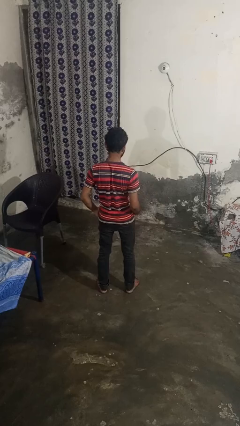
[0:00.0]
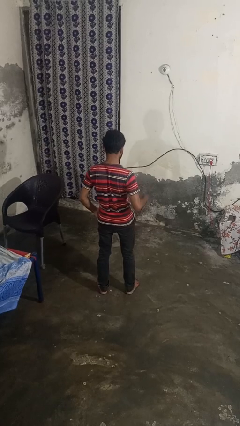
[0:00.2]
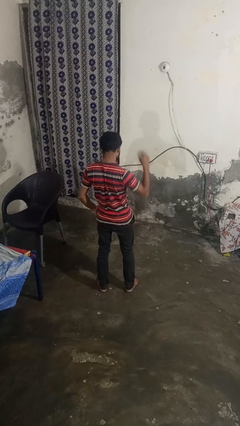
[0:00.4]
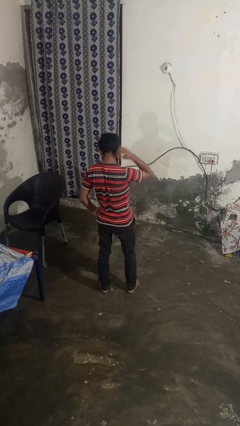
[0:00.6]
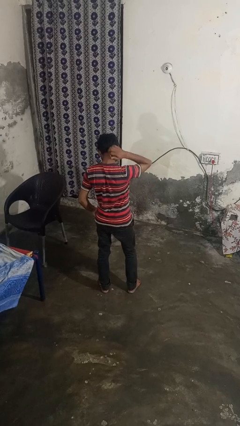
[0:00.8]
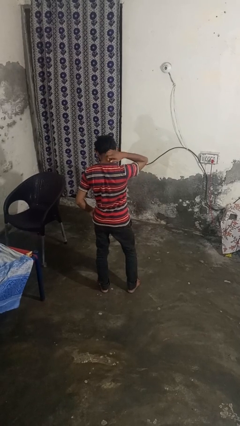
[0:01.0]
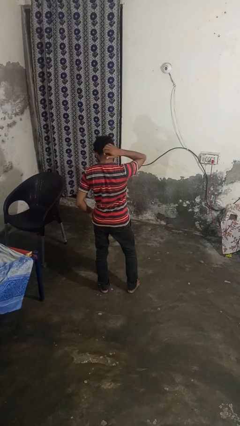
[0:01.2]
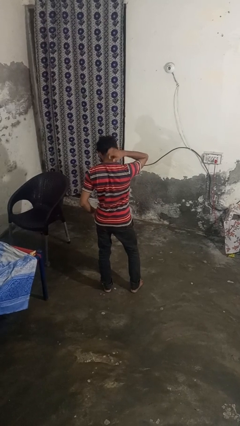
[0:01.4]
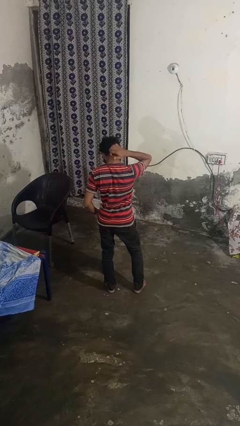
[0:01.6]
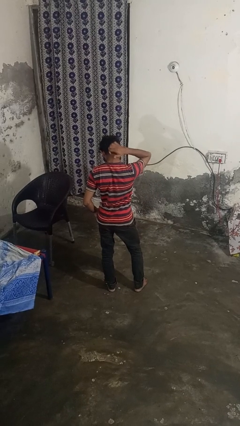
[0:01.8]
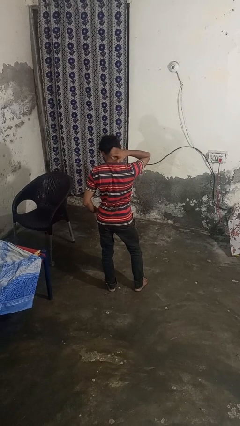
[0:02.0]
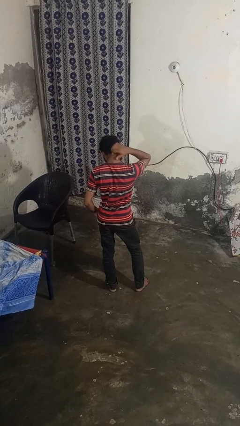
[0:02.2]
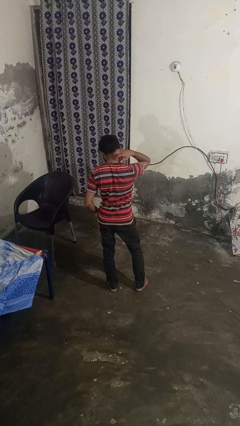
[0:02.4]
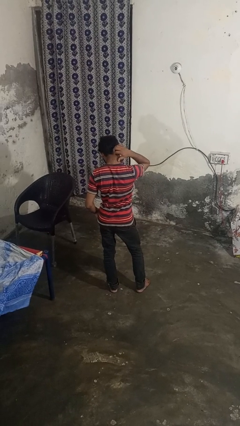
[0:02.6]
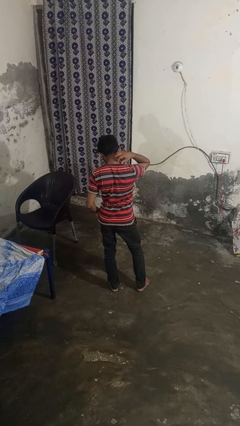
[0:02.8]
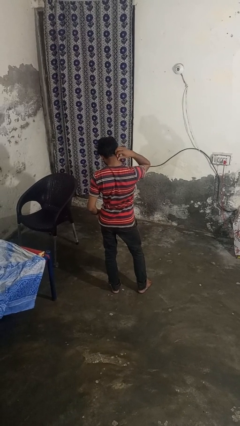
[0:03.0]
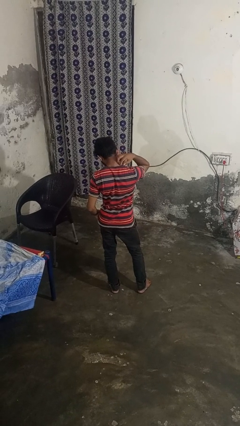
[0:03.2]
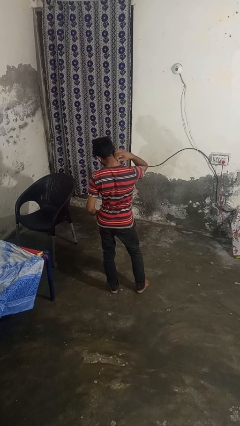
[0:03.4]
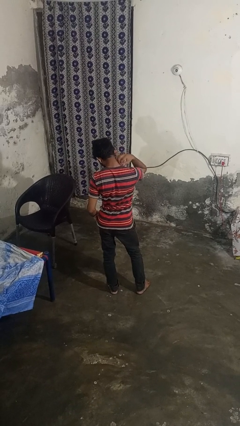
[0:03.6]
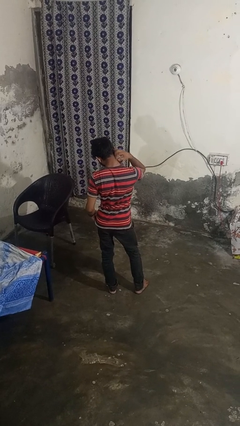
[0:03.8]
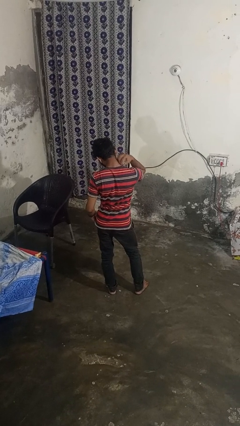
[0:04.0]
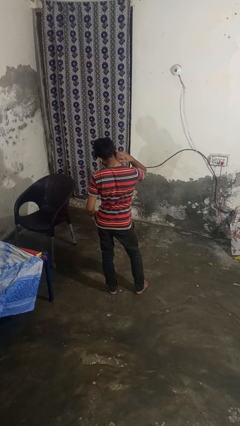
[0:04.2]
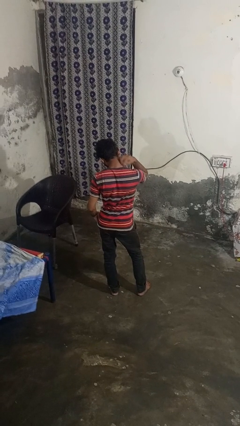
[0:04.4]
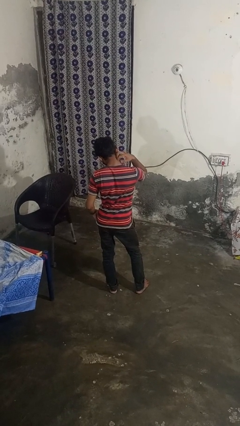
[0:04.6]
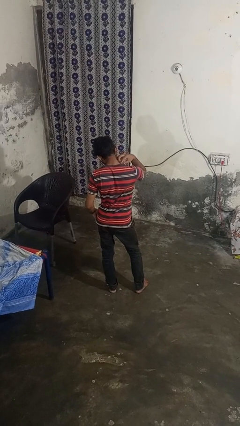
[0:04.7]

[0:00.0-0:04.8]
person cracks knuckles

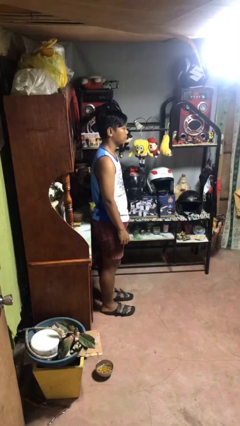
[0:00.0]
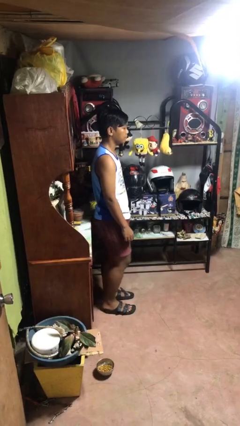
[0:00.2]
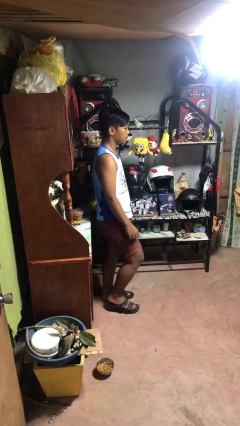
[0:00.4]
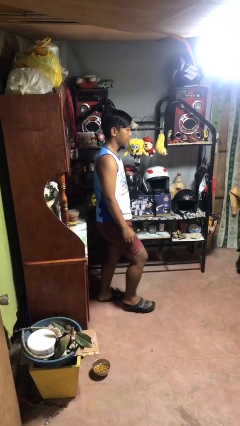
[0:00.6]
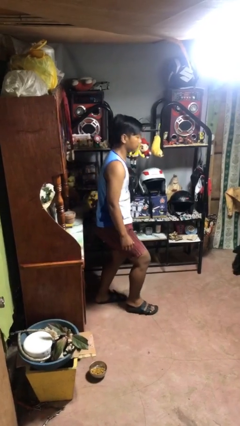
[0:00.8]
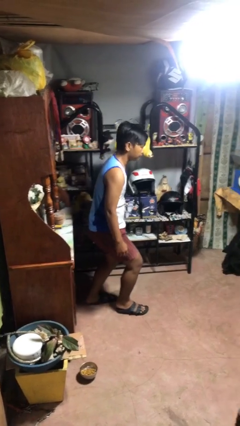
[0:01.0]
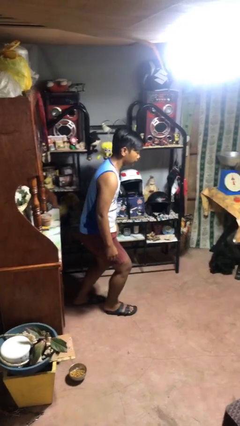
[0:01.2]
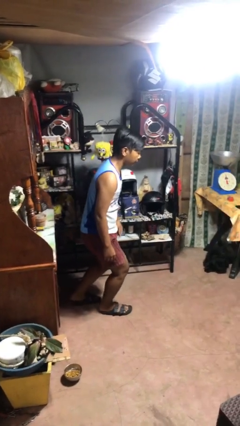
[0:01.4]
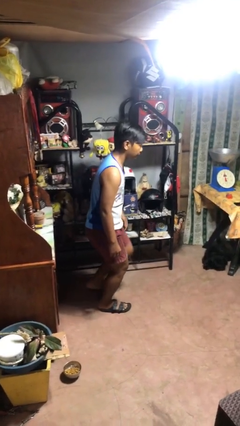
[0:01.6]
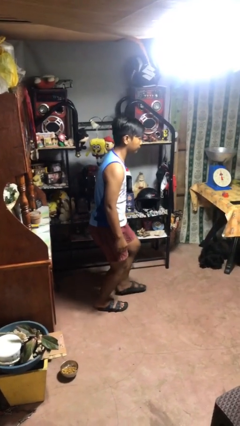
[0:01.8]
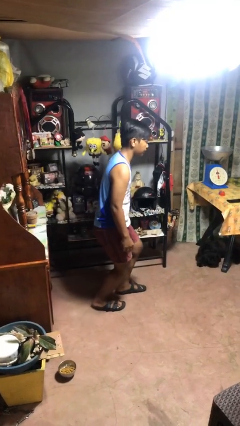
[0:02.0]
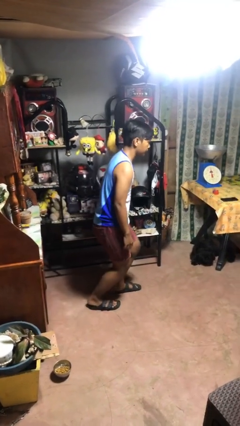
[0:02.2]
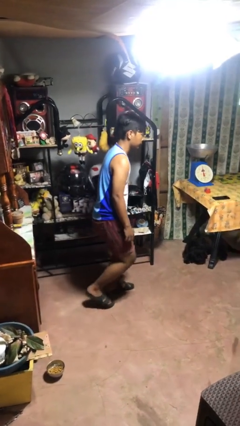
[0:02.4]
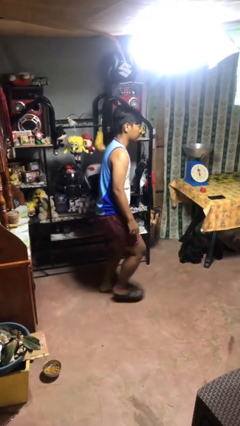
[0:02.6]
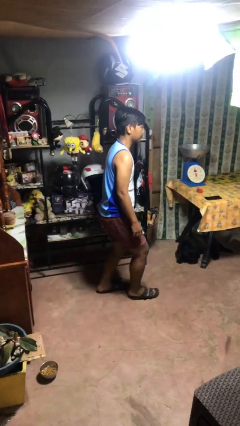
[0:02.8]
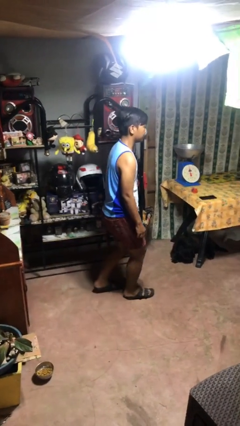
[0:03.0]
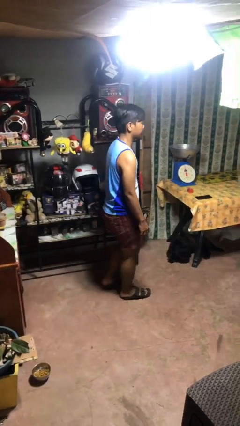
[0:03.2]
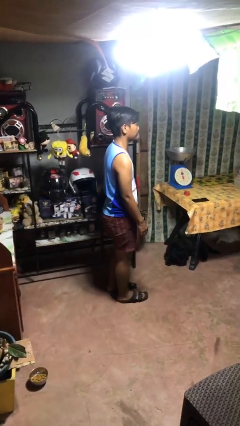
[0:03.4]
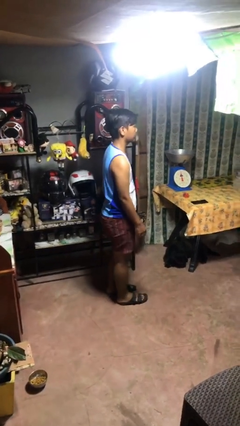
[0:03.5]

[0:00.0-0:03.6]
person walks tiptoe

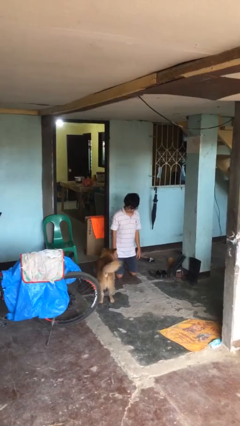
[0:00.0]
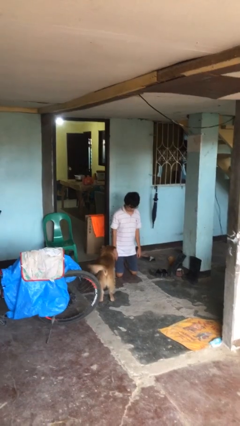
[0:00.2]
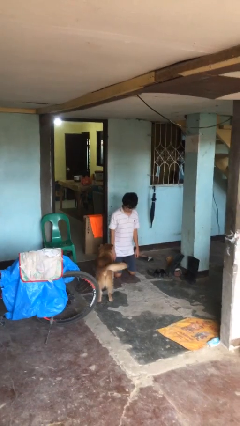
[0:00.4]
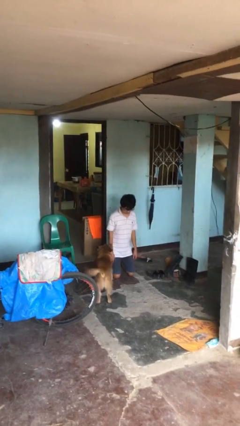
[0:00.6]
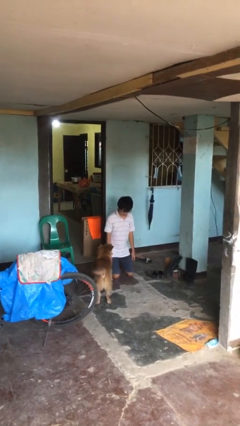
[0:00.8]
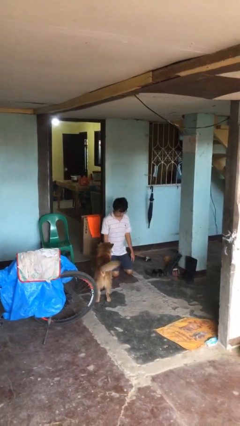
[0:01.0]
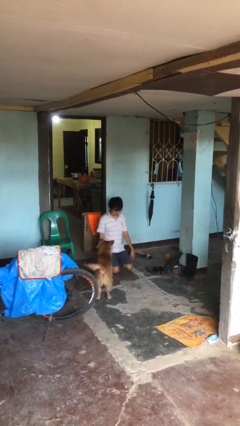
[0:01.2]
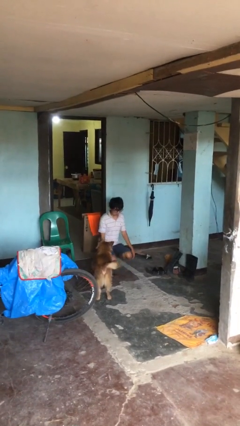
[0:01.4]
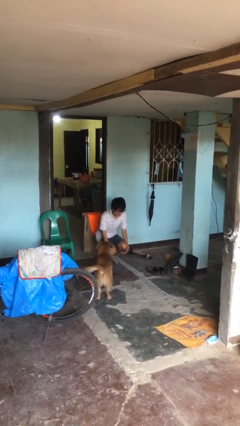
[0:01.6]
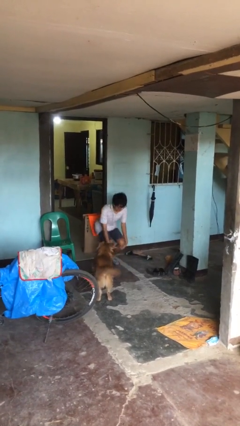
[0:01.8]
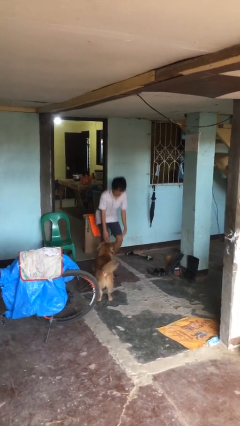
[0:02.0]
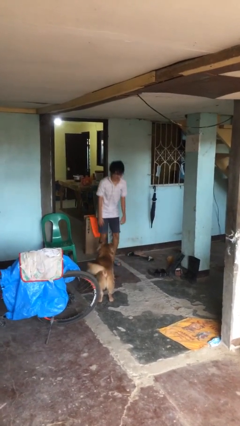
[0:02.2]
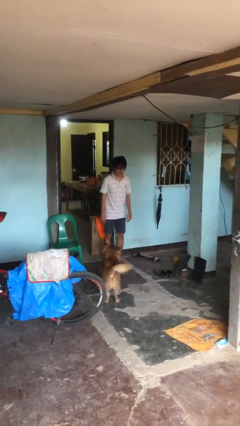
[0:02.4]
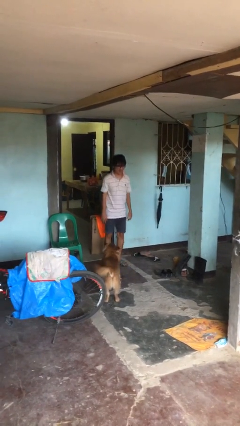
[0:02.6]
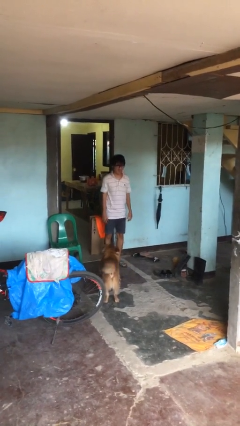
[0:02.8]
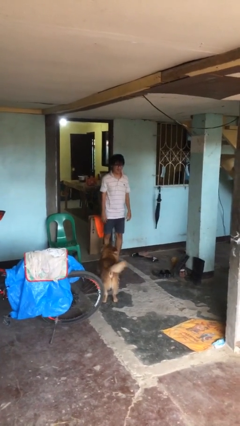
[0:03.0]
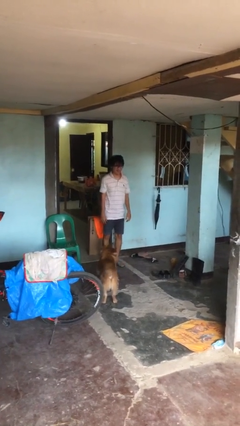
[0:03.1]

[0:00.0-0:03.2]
person stands up from floor

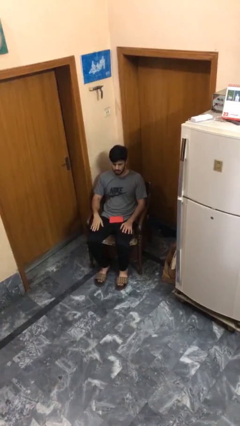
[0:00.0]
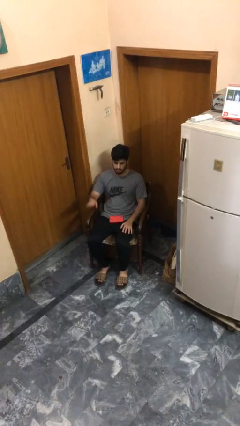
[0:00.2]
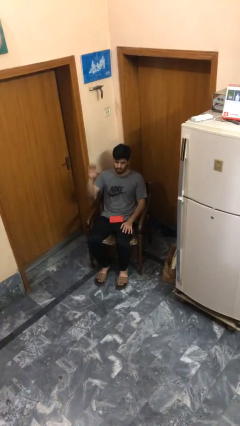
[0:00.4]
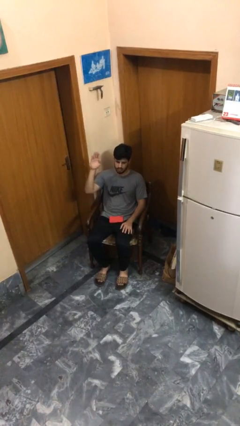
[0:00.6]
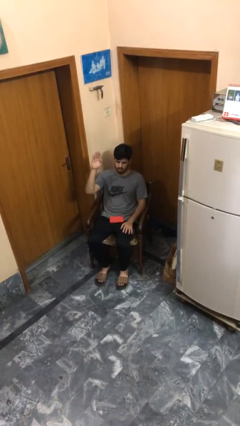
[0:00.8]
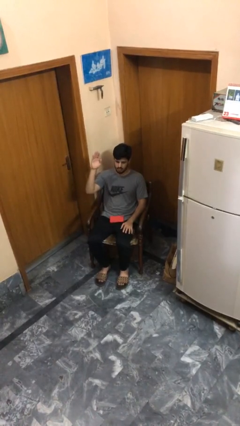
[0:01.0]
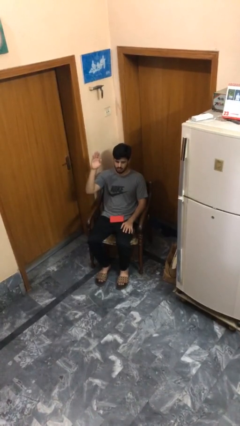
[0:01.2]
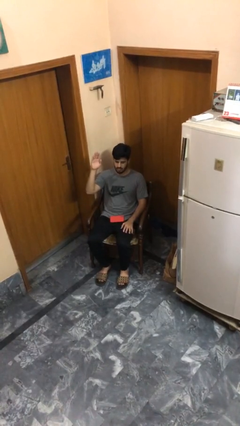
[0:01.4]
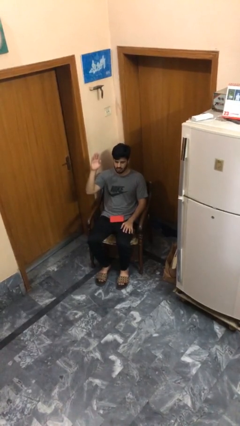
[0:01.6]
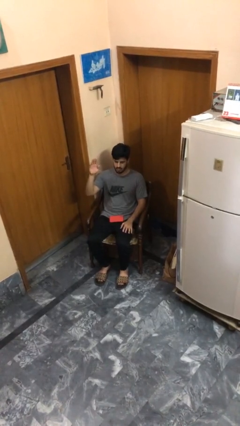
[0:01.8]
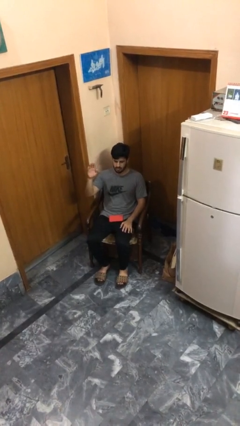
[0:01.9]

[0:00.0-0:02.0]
person gestures raise hand

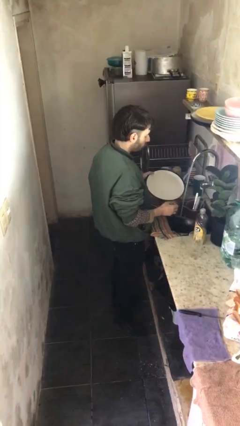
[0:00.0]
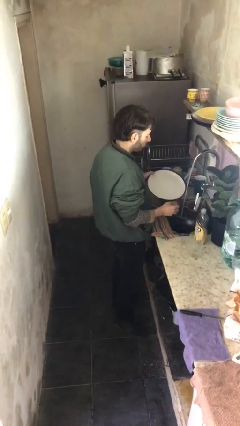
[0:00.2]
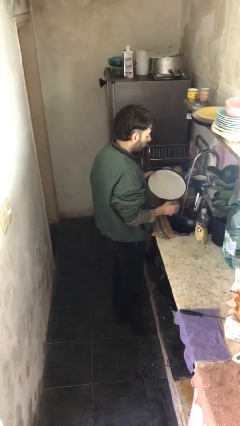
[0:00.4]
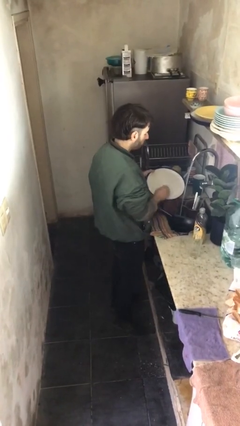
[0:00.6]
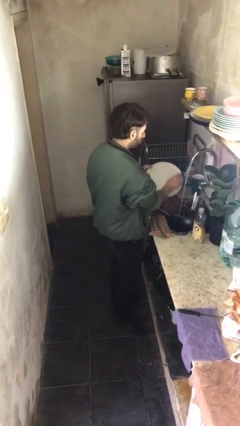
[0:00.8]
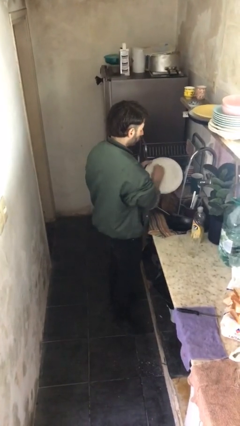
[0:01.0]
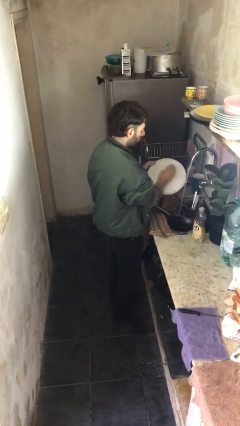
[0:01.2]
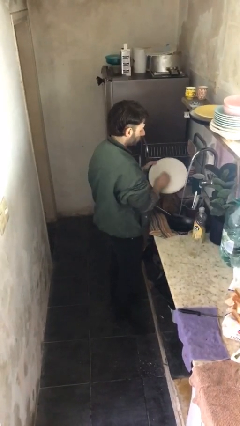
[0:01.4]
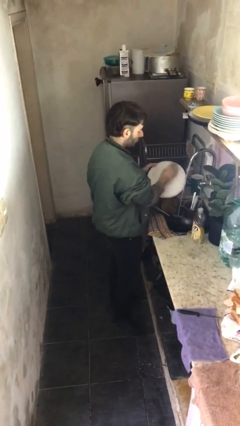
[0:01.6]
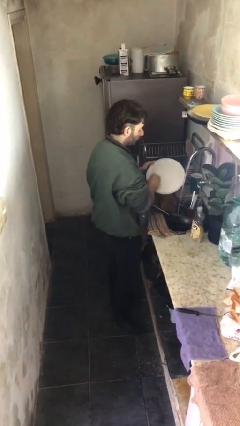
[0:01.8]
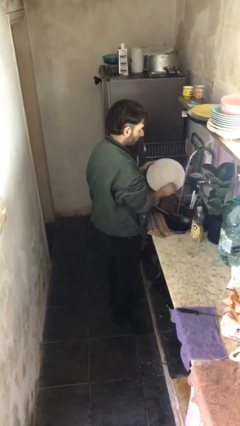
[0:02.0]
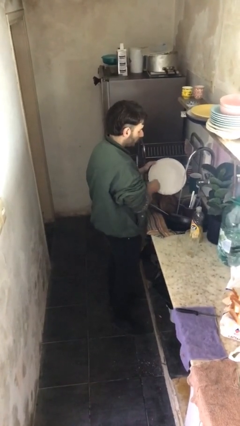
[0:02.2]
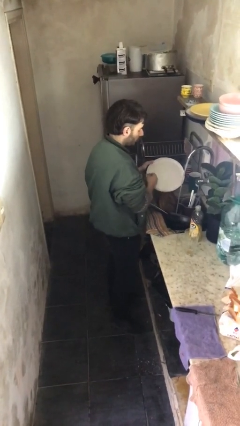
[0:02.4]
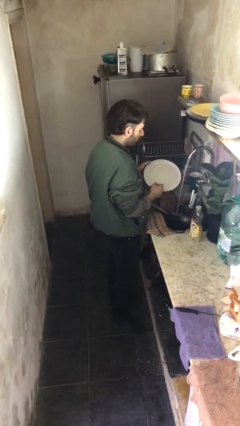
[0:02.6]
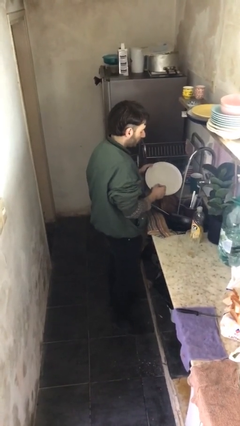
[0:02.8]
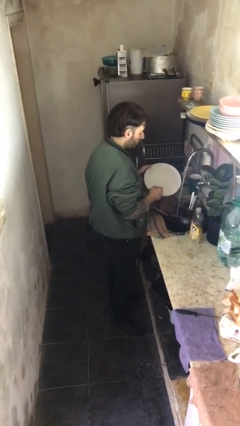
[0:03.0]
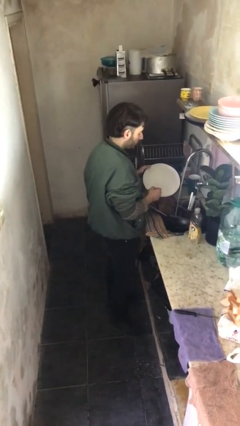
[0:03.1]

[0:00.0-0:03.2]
person washes dish

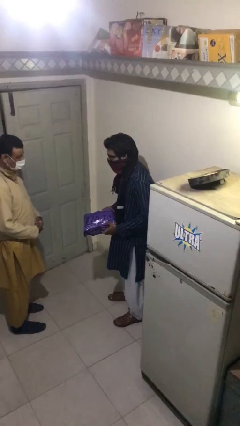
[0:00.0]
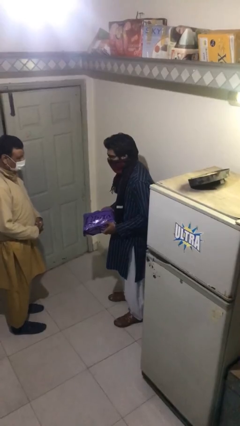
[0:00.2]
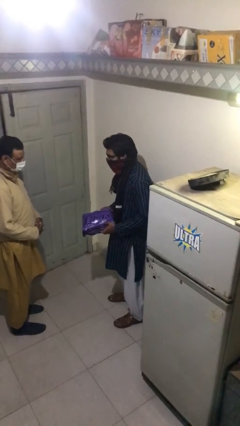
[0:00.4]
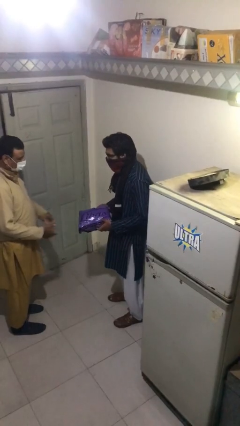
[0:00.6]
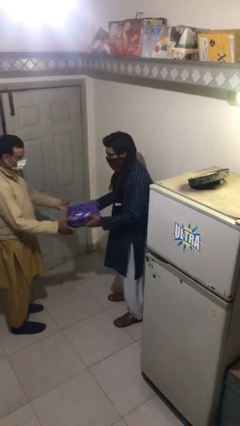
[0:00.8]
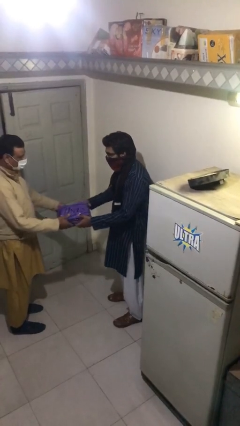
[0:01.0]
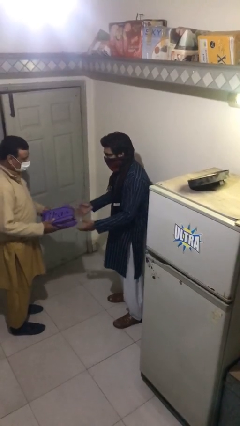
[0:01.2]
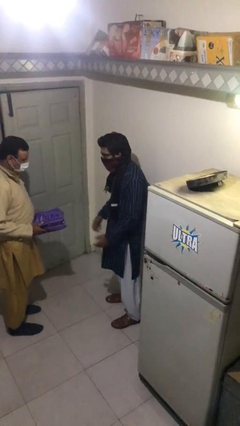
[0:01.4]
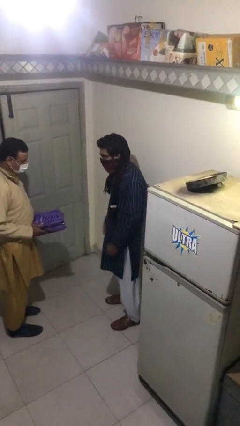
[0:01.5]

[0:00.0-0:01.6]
person transfers object to person
